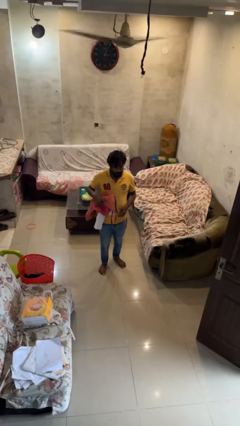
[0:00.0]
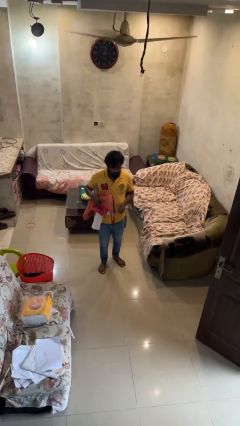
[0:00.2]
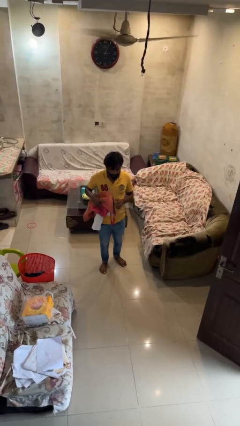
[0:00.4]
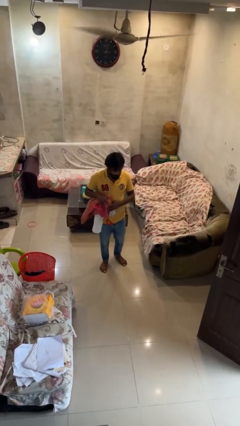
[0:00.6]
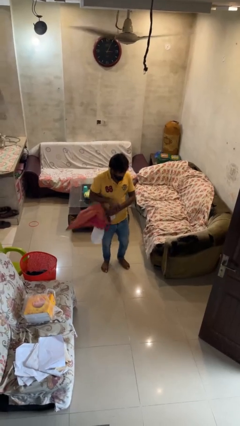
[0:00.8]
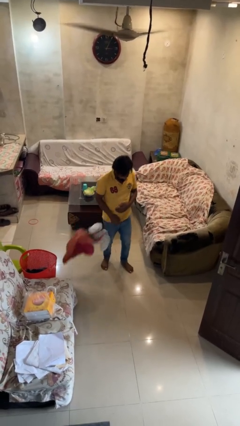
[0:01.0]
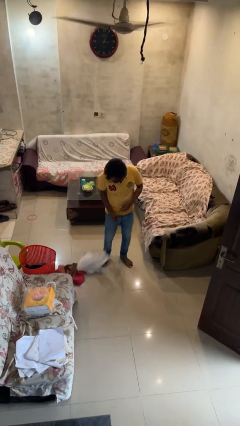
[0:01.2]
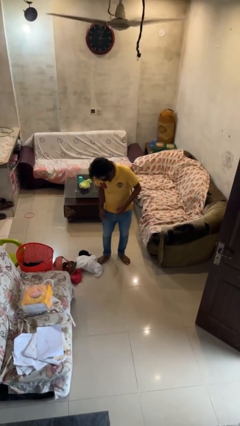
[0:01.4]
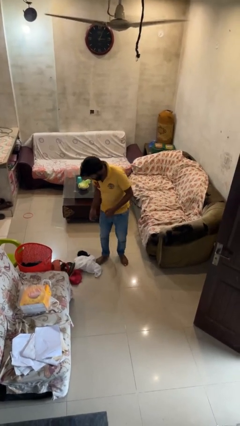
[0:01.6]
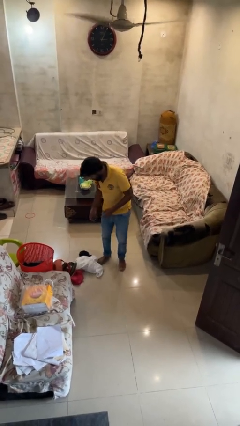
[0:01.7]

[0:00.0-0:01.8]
person drops object

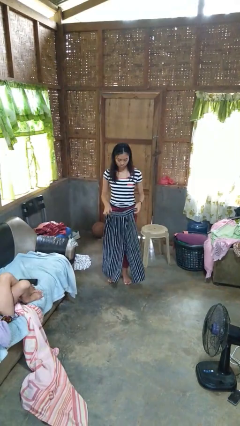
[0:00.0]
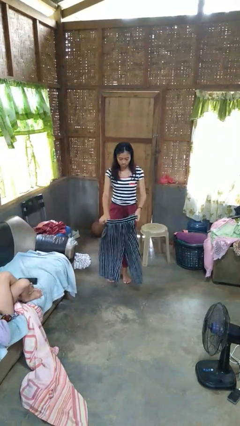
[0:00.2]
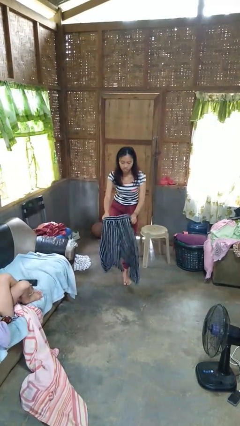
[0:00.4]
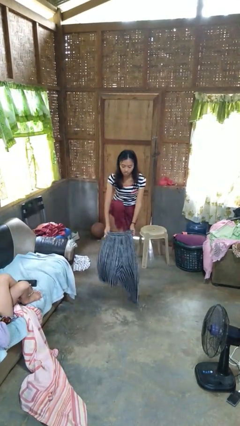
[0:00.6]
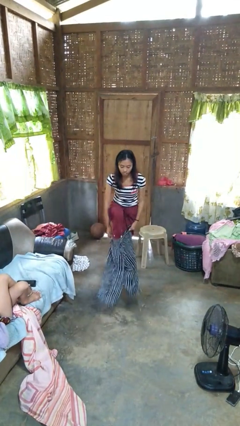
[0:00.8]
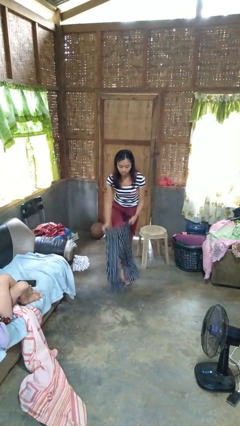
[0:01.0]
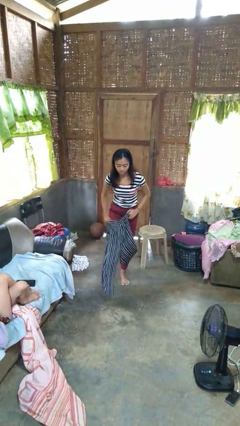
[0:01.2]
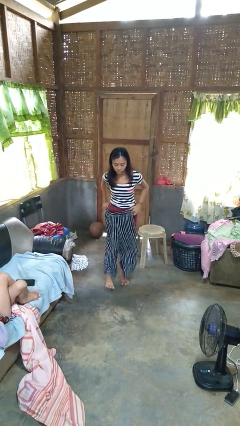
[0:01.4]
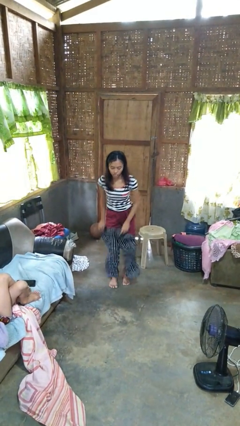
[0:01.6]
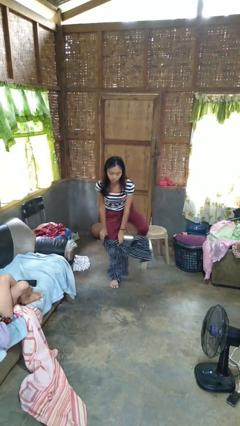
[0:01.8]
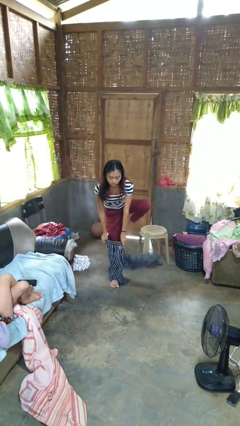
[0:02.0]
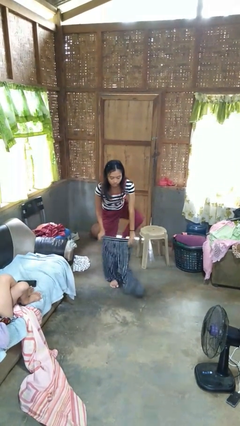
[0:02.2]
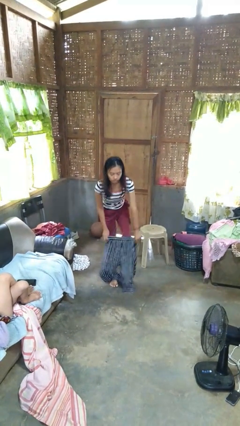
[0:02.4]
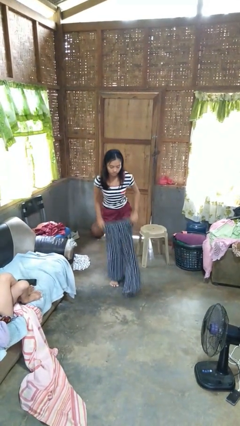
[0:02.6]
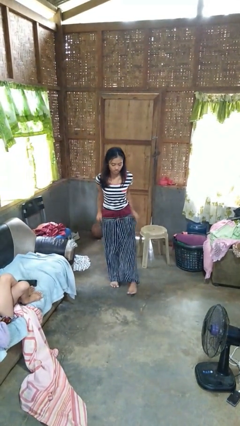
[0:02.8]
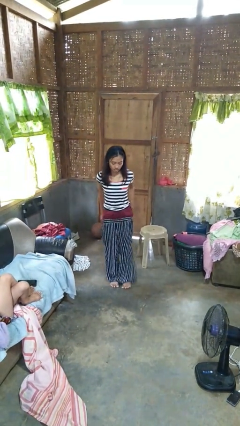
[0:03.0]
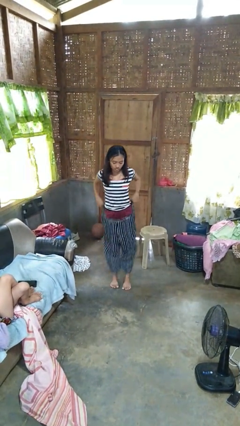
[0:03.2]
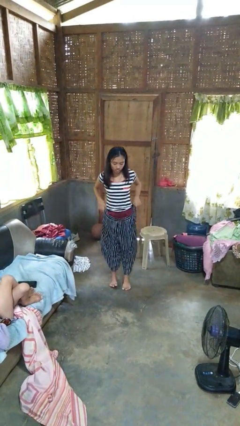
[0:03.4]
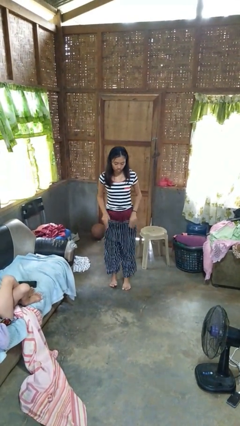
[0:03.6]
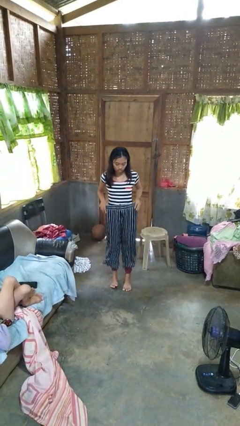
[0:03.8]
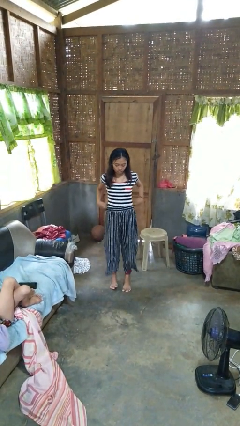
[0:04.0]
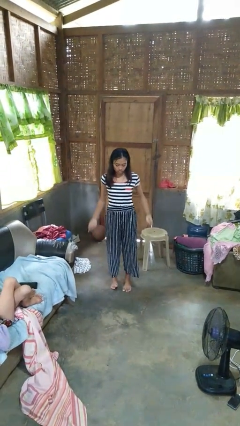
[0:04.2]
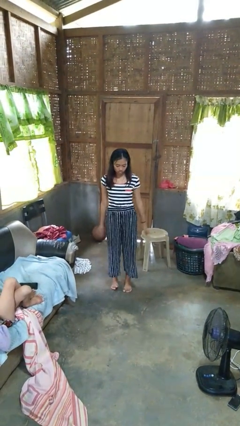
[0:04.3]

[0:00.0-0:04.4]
person puts on pants

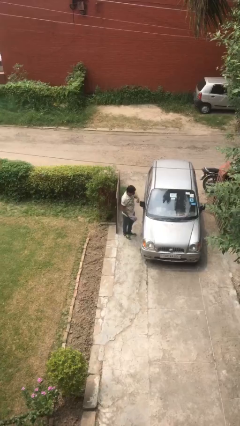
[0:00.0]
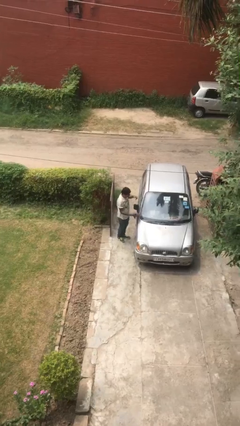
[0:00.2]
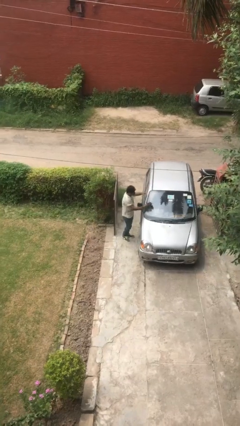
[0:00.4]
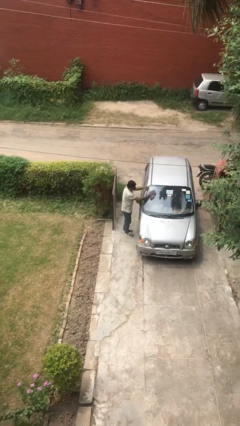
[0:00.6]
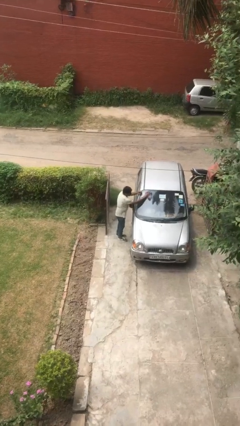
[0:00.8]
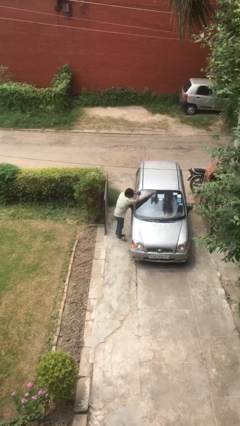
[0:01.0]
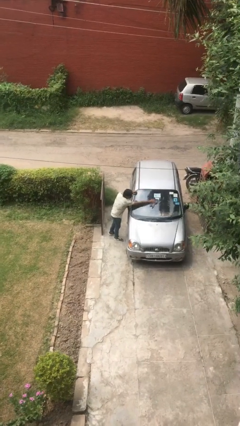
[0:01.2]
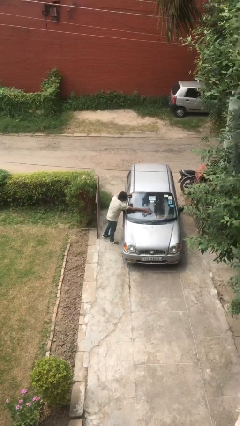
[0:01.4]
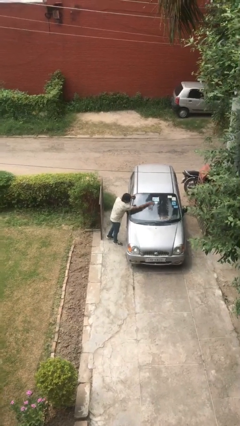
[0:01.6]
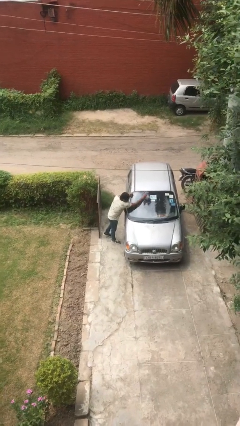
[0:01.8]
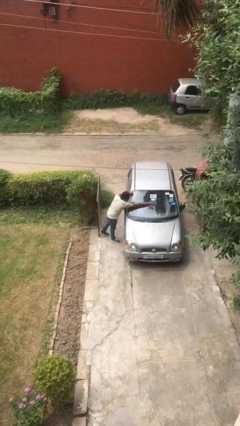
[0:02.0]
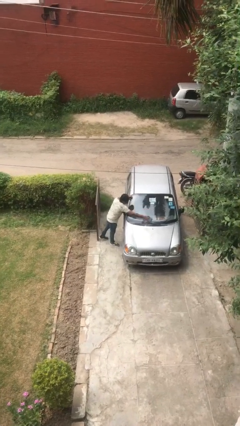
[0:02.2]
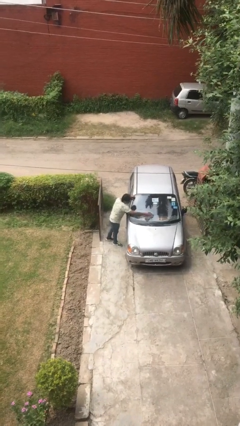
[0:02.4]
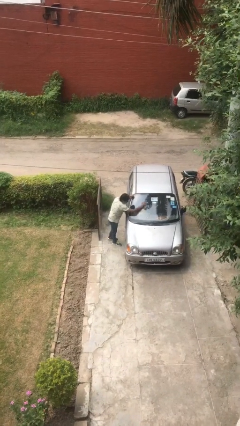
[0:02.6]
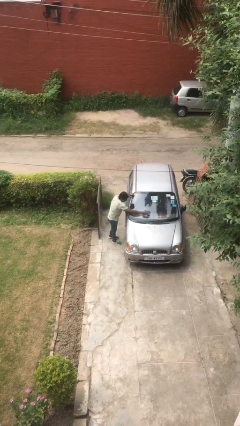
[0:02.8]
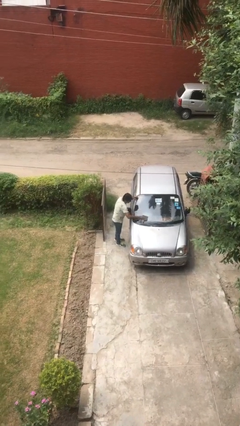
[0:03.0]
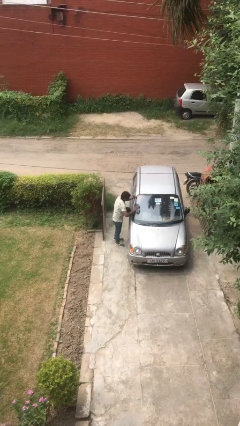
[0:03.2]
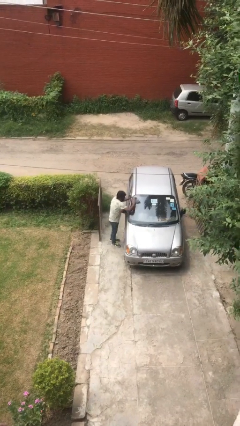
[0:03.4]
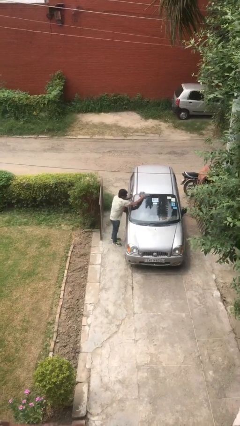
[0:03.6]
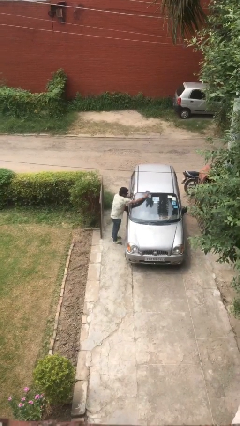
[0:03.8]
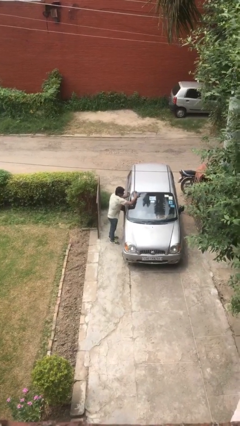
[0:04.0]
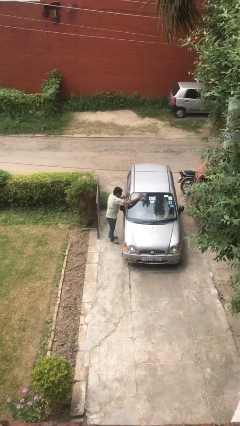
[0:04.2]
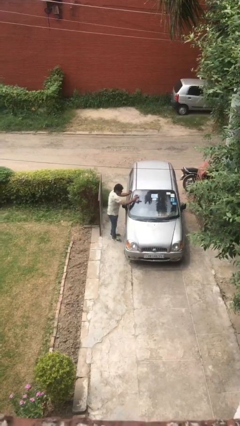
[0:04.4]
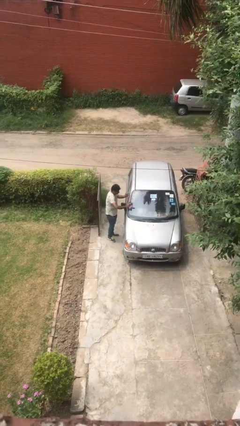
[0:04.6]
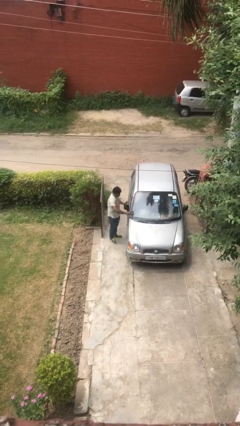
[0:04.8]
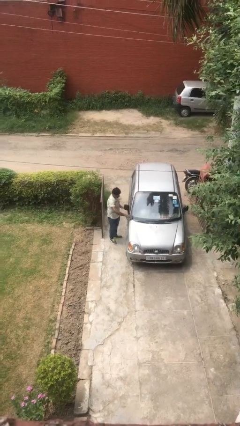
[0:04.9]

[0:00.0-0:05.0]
person polishes car with rag

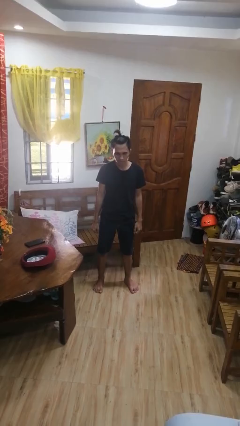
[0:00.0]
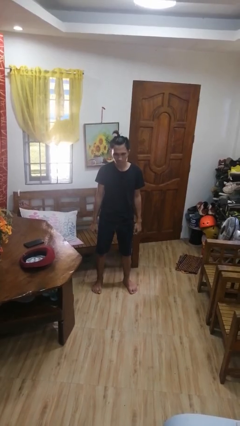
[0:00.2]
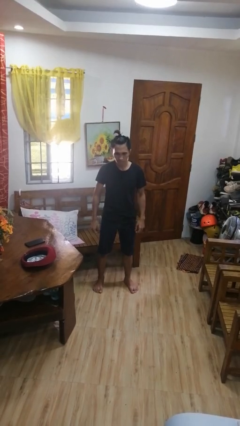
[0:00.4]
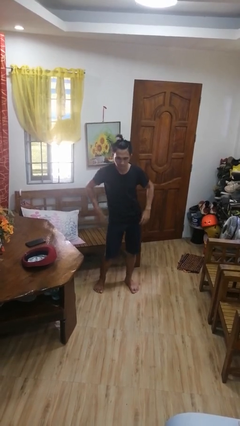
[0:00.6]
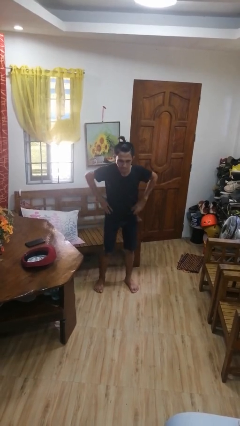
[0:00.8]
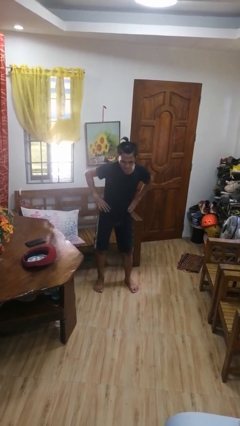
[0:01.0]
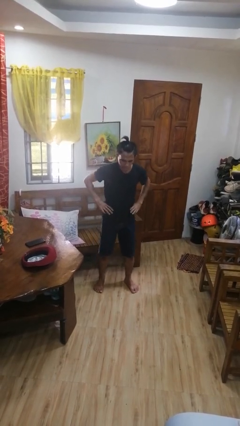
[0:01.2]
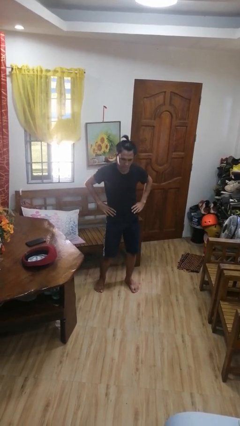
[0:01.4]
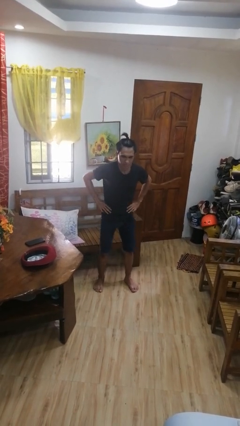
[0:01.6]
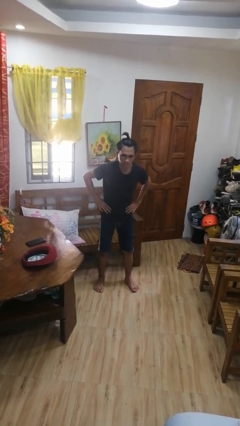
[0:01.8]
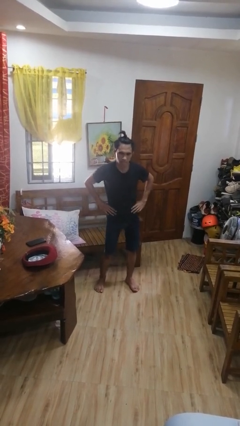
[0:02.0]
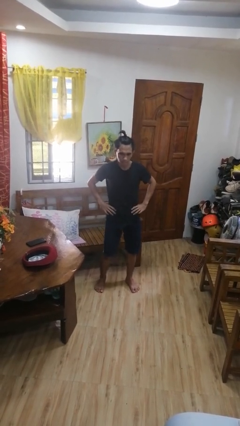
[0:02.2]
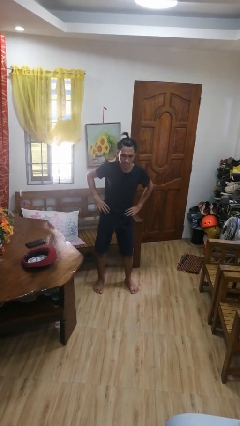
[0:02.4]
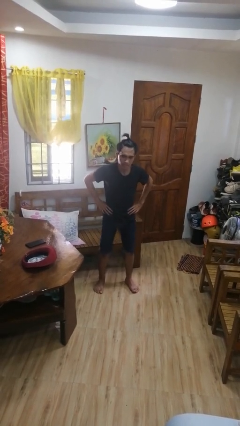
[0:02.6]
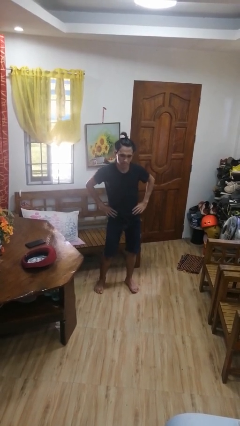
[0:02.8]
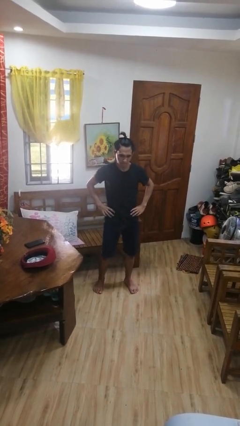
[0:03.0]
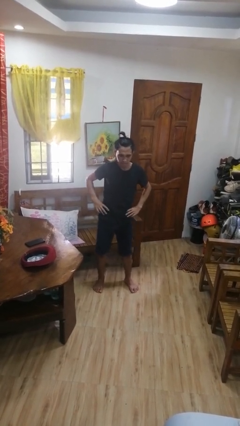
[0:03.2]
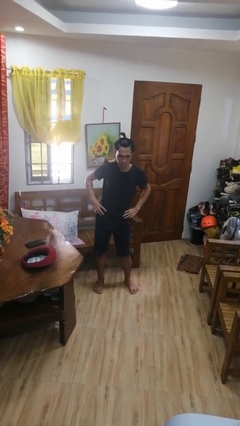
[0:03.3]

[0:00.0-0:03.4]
person wiggles hips

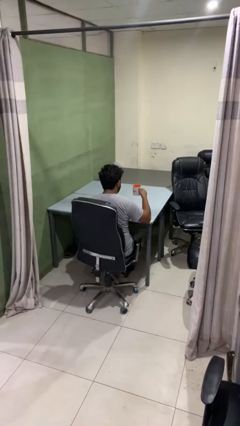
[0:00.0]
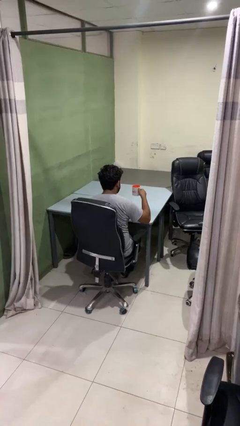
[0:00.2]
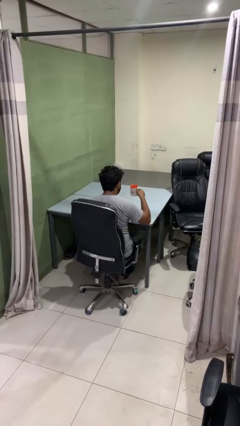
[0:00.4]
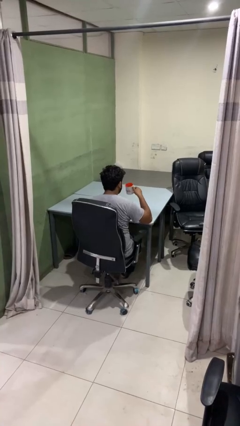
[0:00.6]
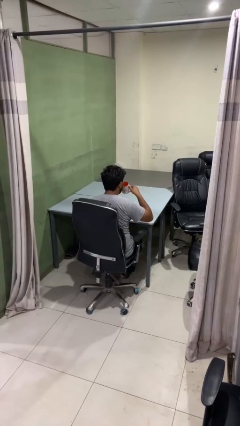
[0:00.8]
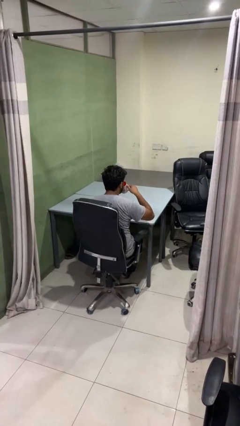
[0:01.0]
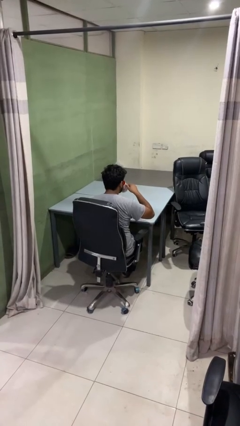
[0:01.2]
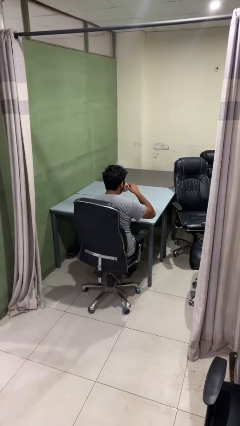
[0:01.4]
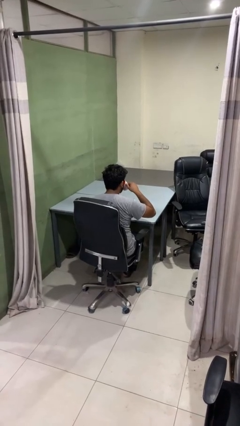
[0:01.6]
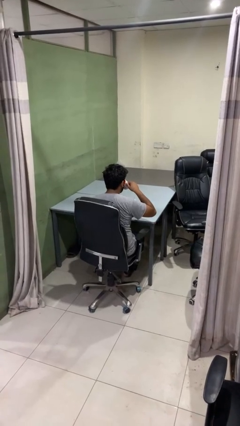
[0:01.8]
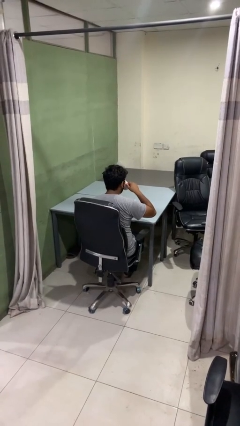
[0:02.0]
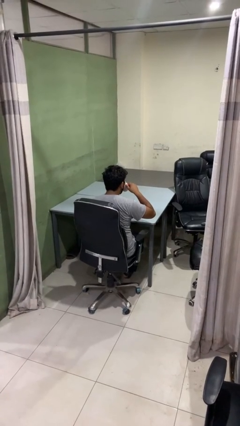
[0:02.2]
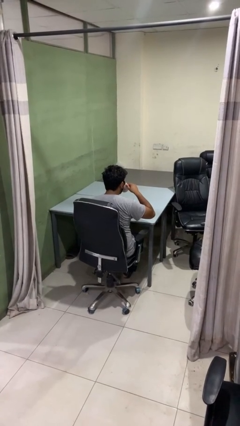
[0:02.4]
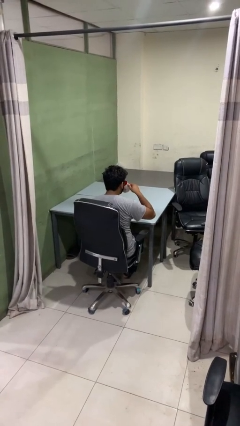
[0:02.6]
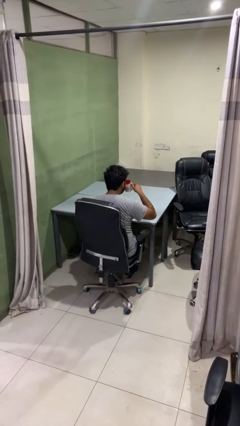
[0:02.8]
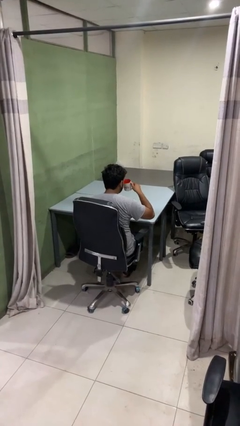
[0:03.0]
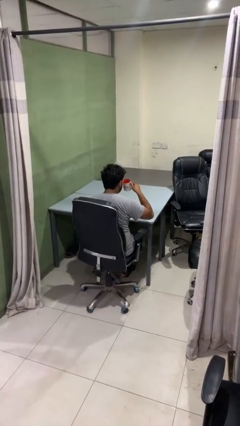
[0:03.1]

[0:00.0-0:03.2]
person drinks from mug
